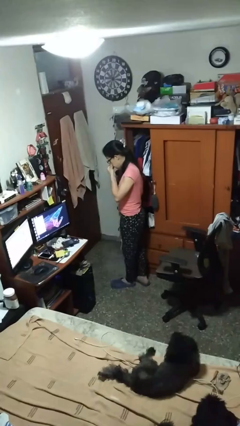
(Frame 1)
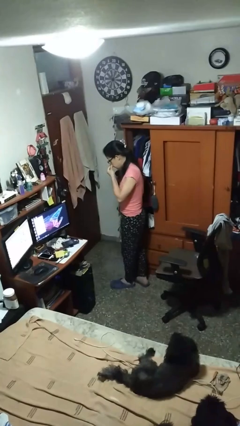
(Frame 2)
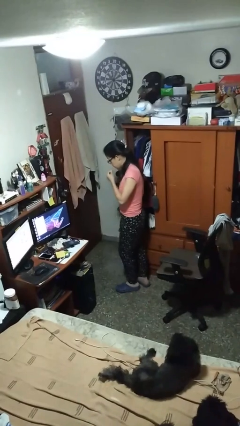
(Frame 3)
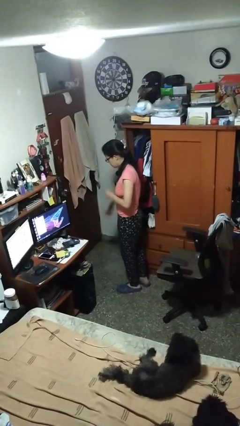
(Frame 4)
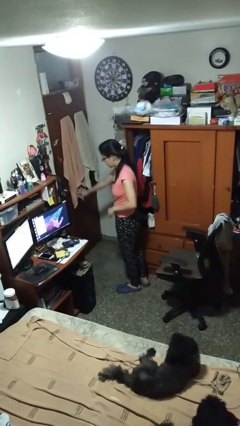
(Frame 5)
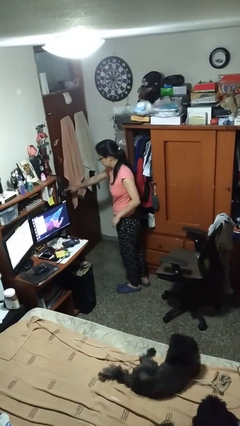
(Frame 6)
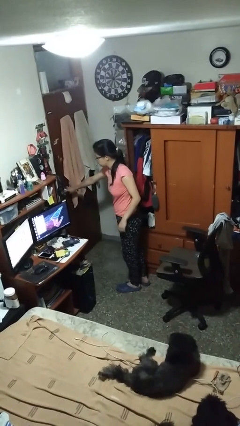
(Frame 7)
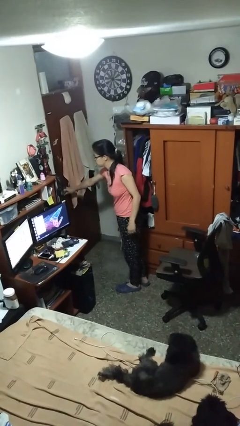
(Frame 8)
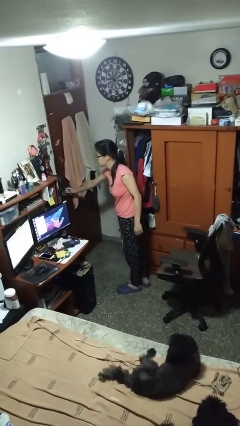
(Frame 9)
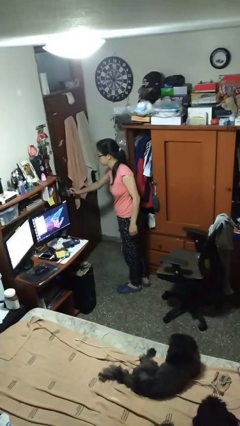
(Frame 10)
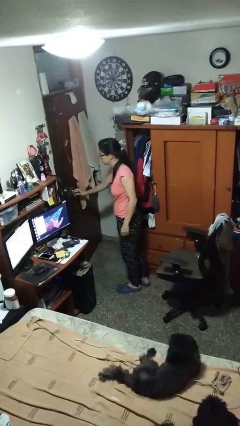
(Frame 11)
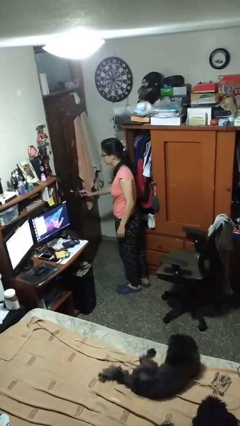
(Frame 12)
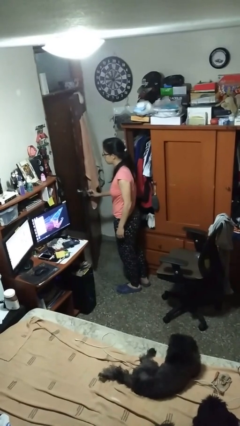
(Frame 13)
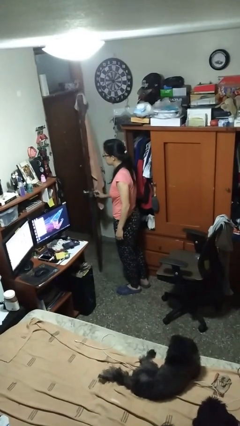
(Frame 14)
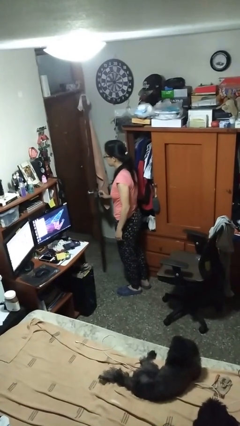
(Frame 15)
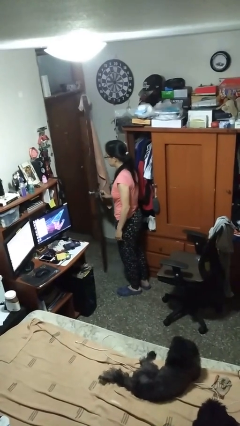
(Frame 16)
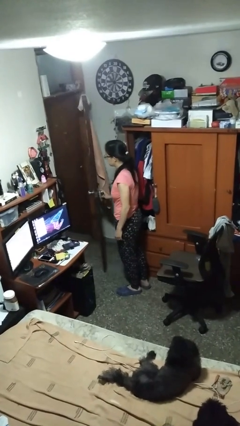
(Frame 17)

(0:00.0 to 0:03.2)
person opens facility door

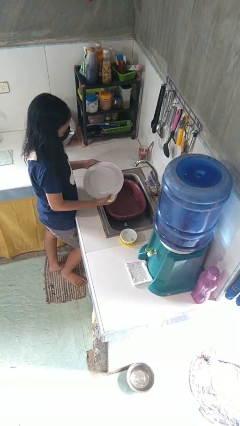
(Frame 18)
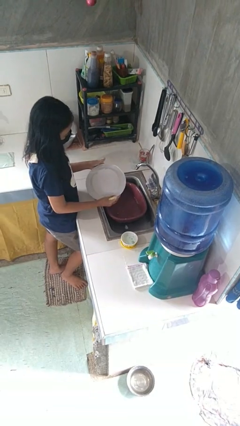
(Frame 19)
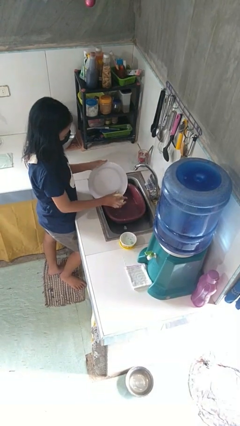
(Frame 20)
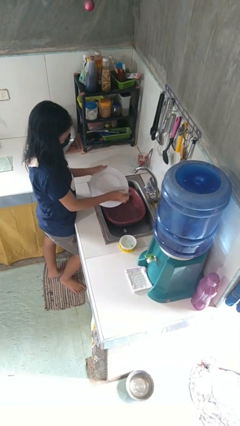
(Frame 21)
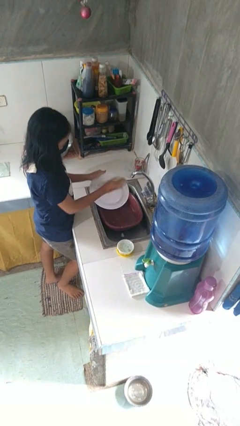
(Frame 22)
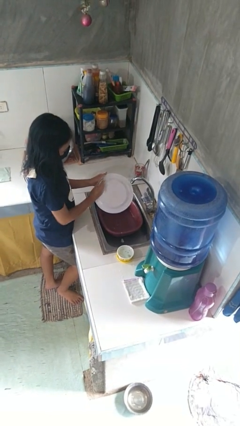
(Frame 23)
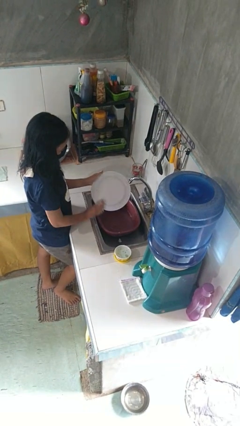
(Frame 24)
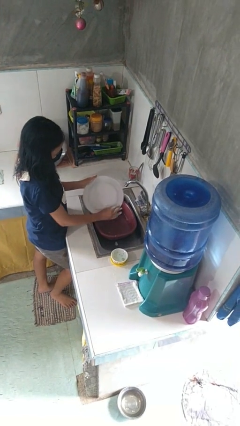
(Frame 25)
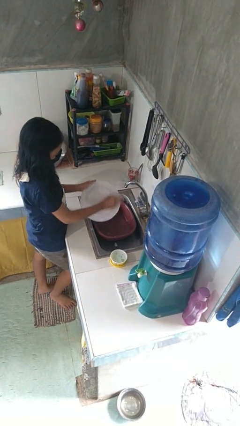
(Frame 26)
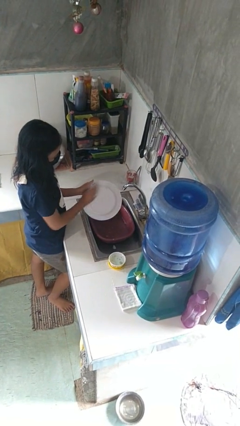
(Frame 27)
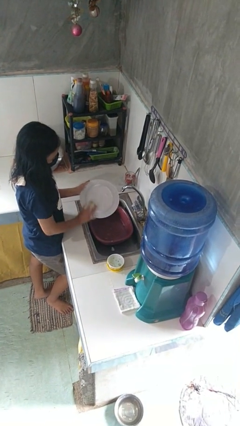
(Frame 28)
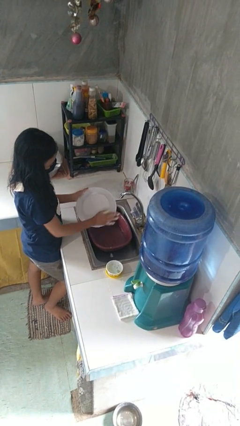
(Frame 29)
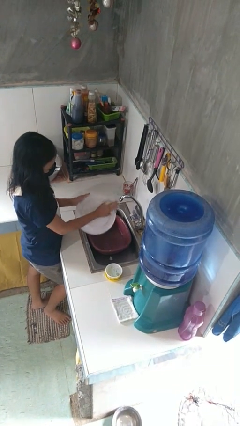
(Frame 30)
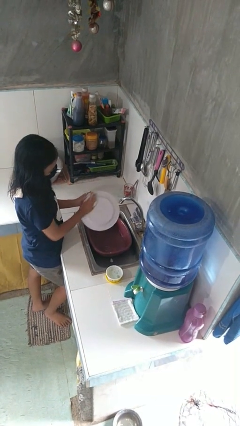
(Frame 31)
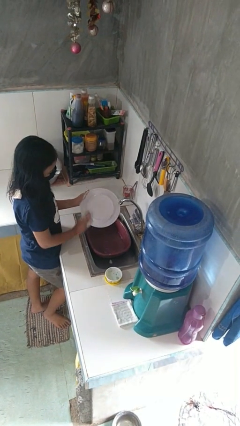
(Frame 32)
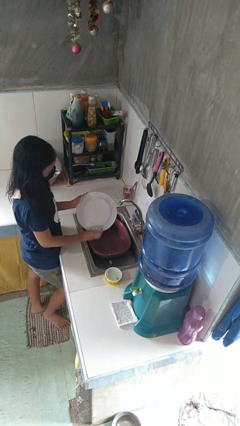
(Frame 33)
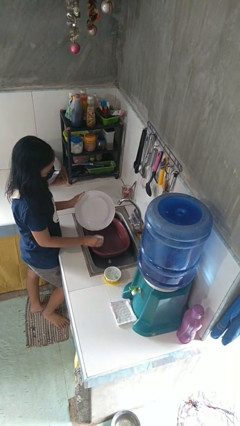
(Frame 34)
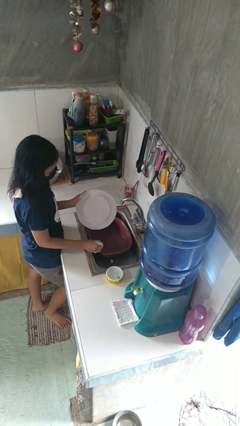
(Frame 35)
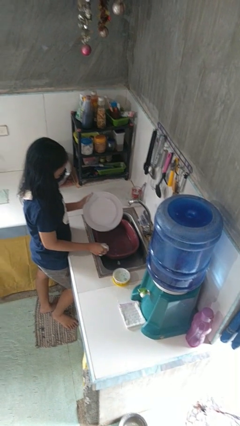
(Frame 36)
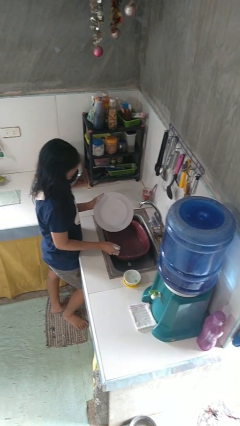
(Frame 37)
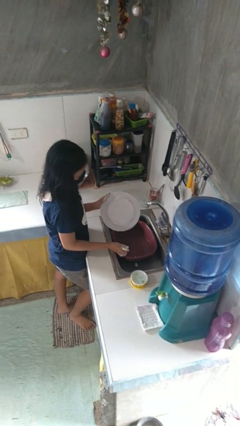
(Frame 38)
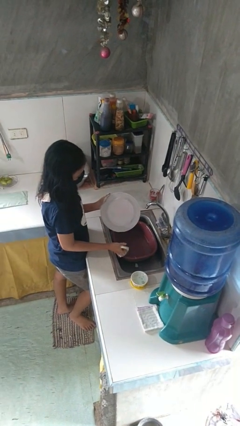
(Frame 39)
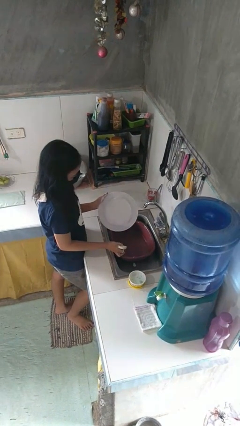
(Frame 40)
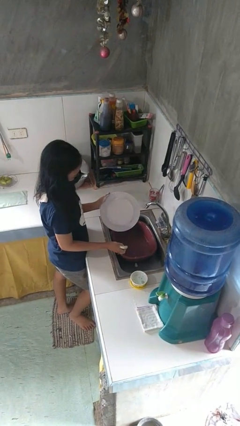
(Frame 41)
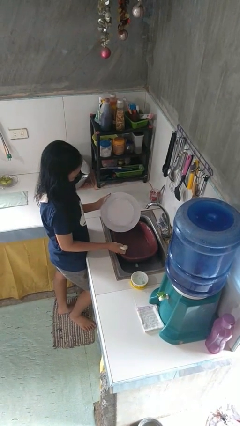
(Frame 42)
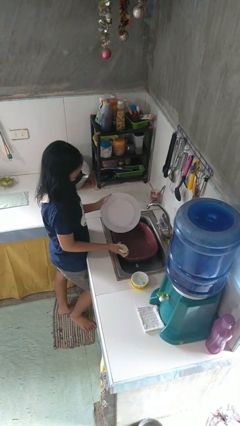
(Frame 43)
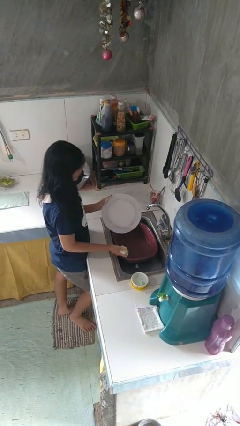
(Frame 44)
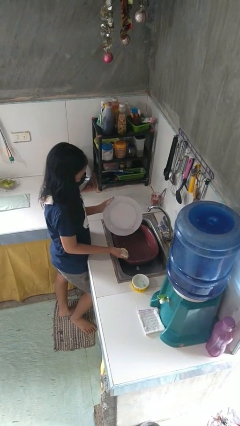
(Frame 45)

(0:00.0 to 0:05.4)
person washes dish

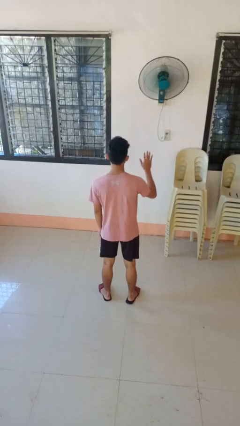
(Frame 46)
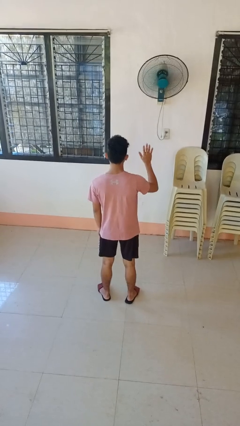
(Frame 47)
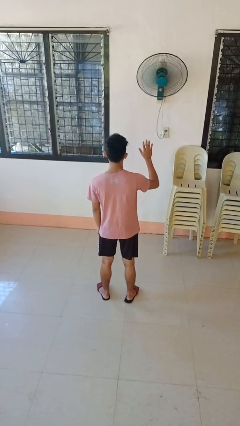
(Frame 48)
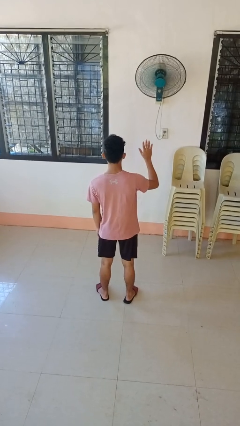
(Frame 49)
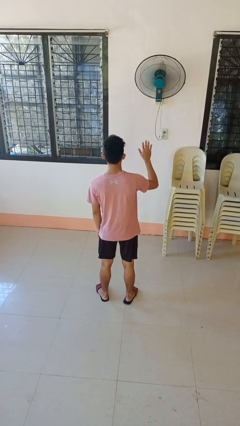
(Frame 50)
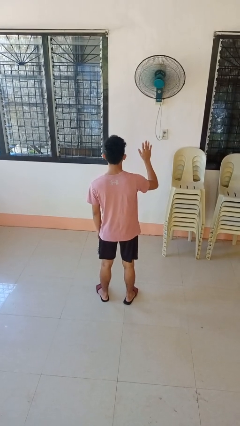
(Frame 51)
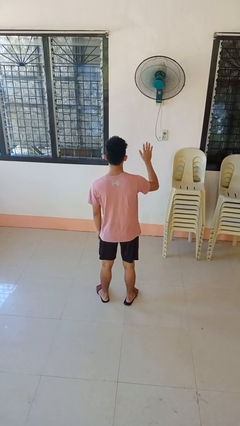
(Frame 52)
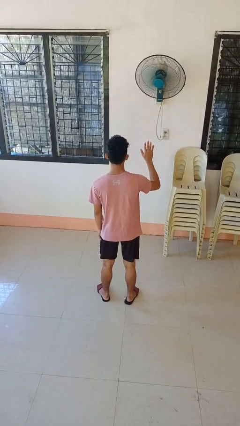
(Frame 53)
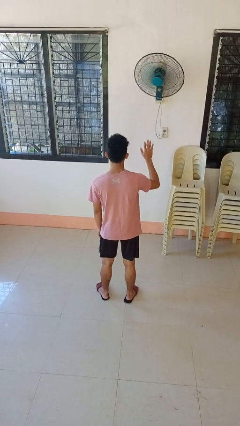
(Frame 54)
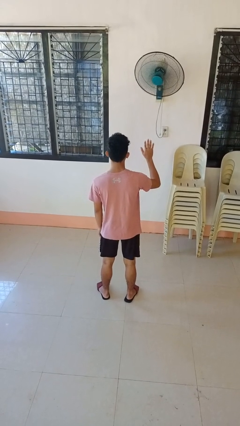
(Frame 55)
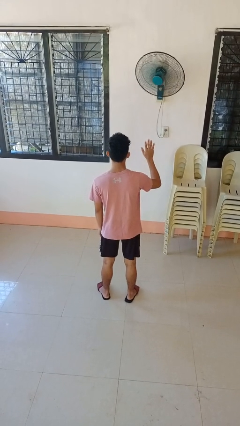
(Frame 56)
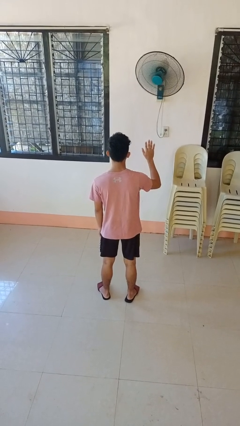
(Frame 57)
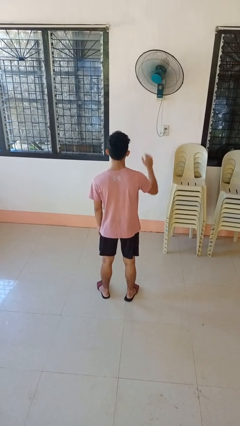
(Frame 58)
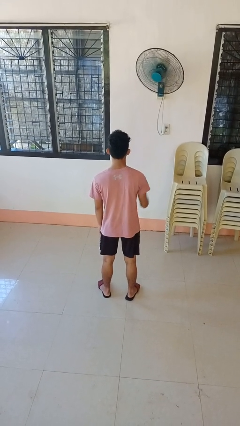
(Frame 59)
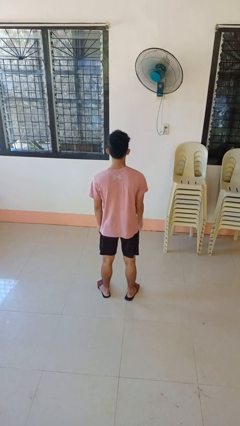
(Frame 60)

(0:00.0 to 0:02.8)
person gestures number five

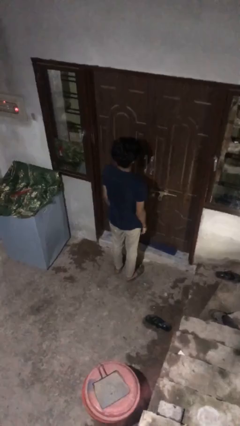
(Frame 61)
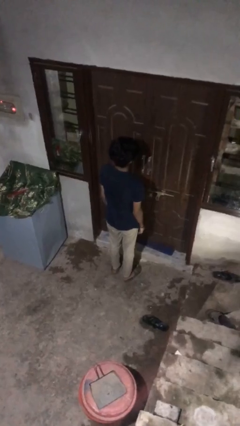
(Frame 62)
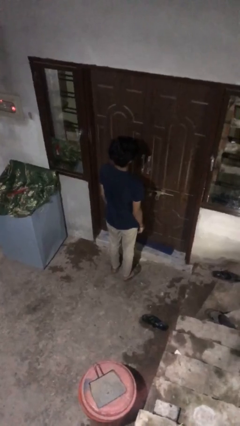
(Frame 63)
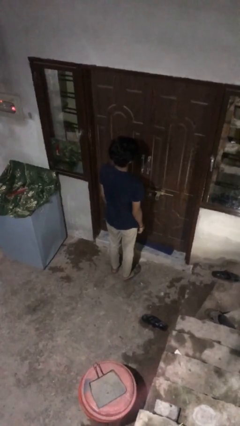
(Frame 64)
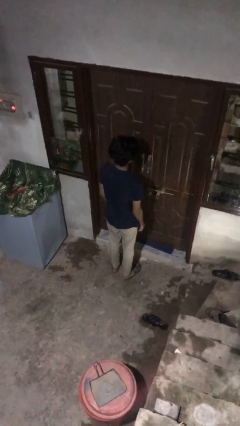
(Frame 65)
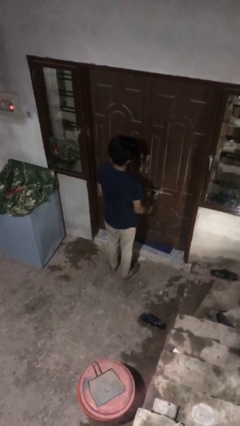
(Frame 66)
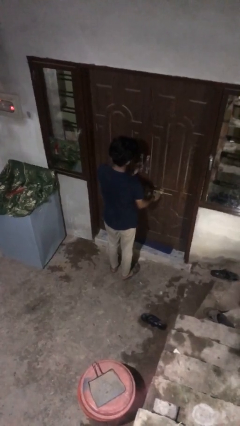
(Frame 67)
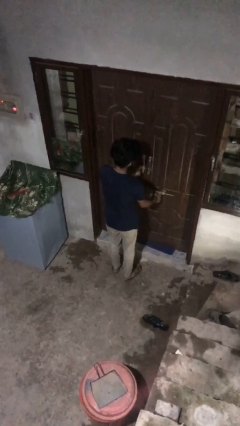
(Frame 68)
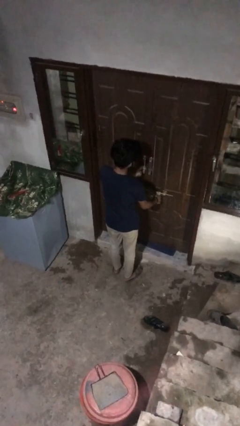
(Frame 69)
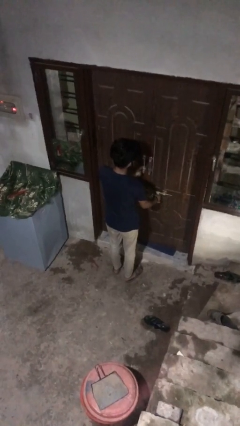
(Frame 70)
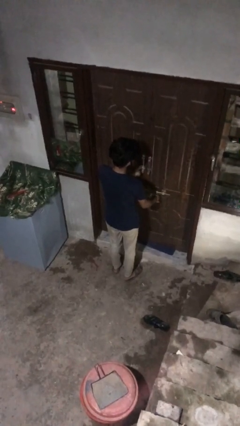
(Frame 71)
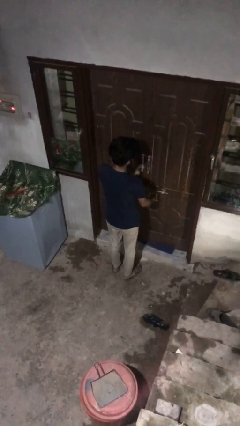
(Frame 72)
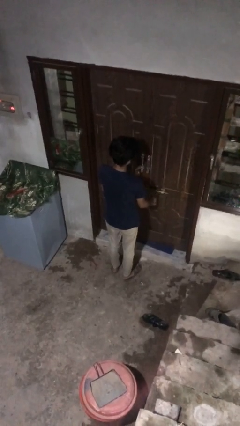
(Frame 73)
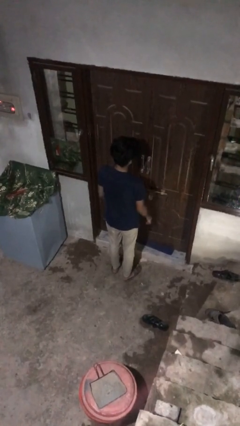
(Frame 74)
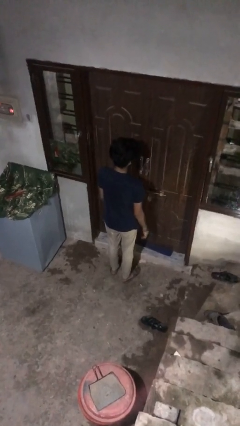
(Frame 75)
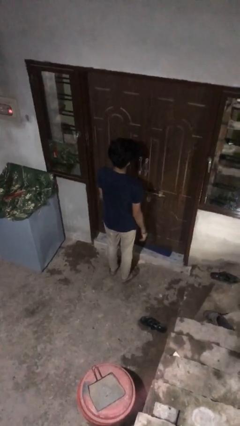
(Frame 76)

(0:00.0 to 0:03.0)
person locks door with keys

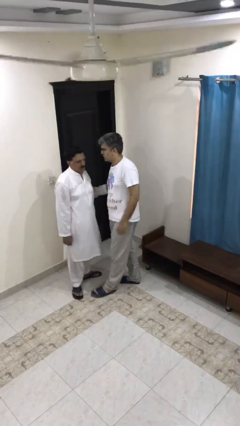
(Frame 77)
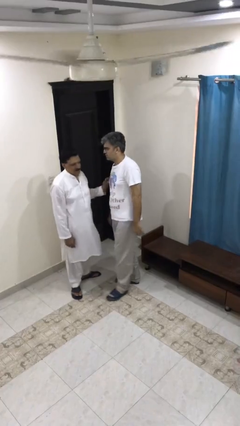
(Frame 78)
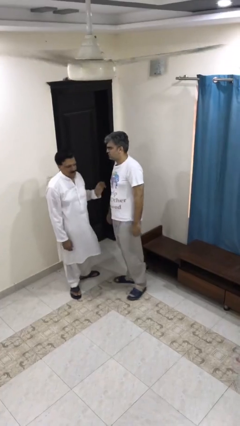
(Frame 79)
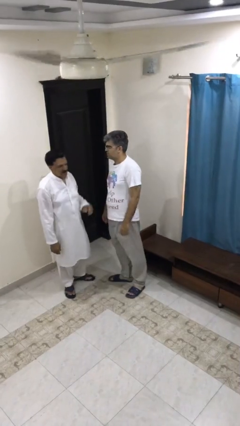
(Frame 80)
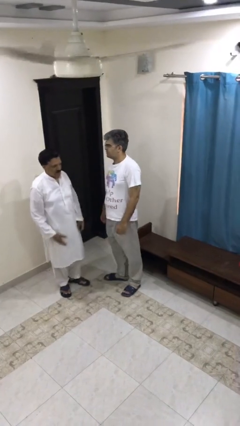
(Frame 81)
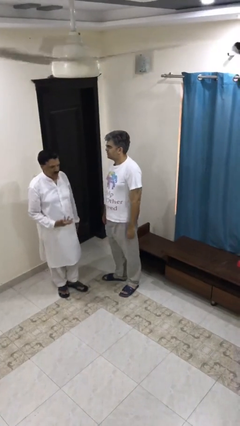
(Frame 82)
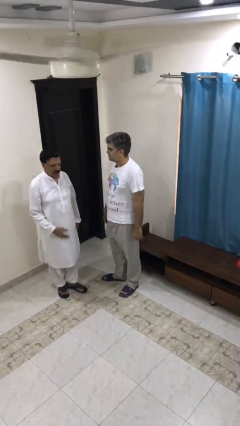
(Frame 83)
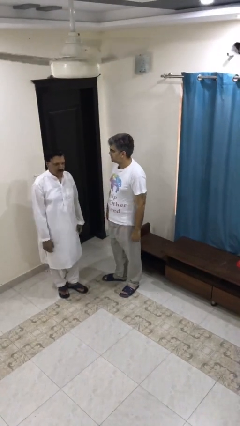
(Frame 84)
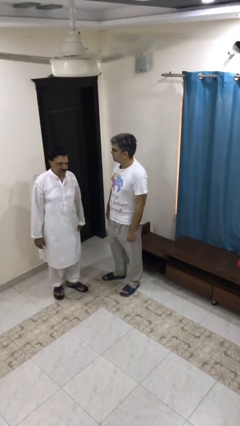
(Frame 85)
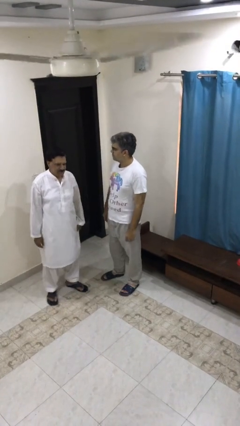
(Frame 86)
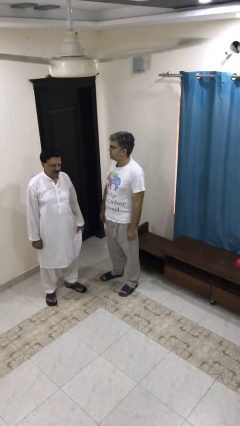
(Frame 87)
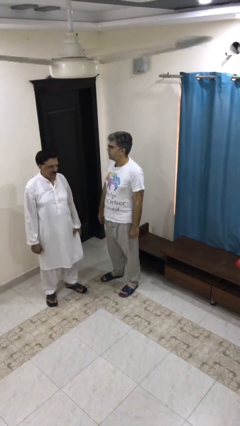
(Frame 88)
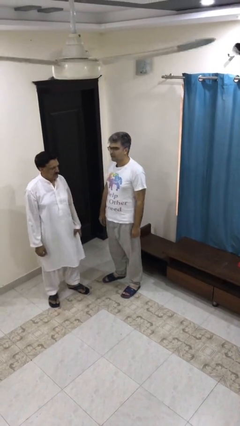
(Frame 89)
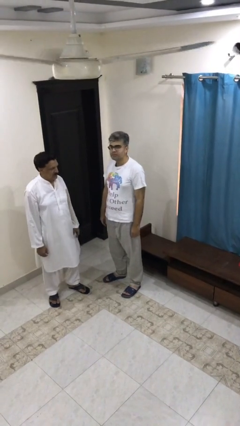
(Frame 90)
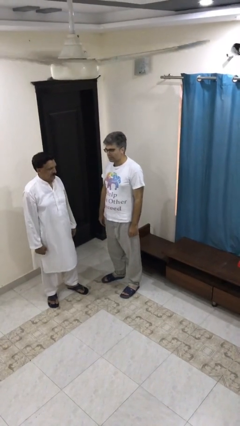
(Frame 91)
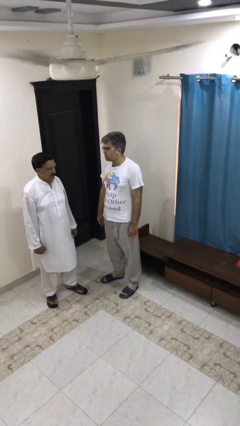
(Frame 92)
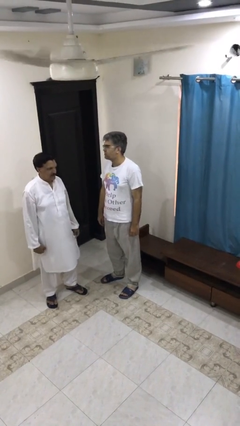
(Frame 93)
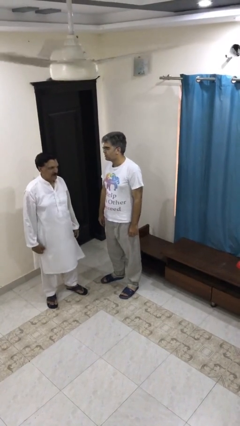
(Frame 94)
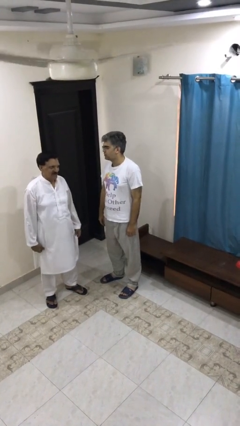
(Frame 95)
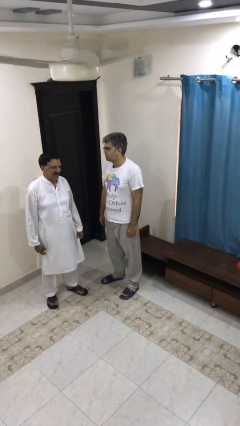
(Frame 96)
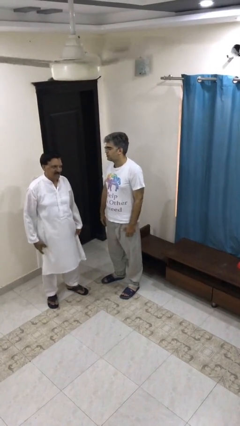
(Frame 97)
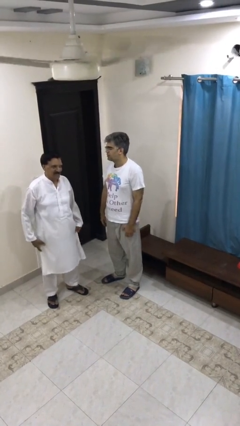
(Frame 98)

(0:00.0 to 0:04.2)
person talks to person
